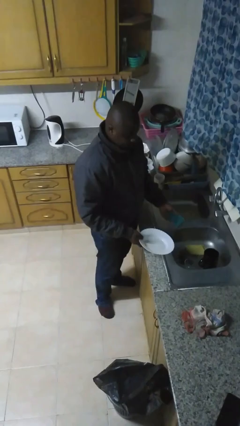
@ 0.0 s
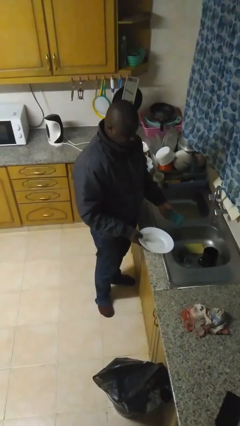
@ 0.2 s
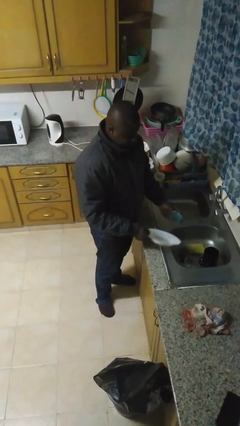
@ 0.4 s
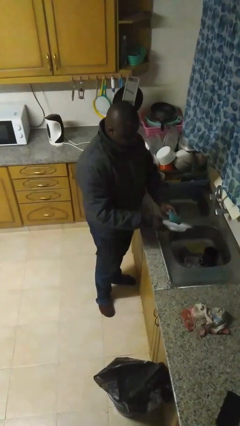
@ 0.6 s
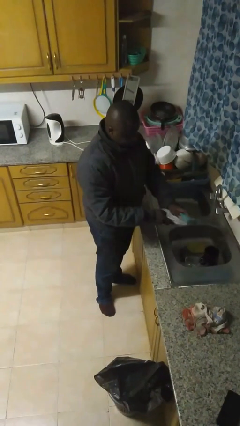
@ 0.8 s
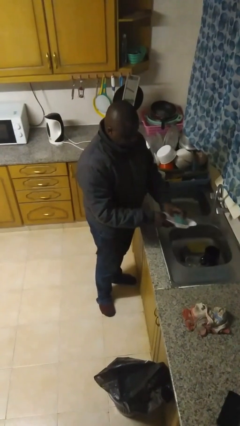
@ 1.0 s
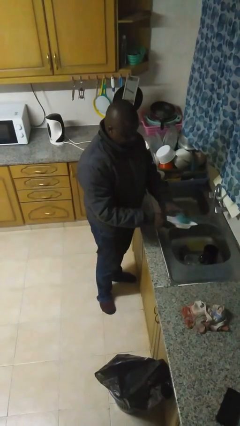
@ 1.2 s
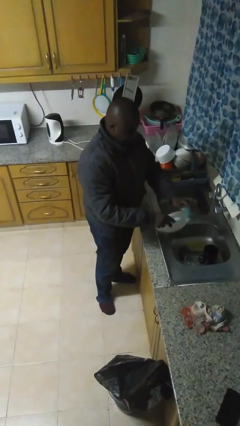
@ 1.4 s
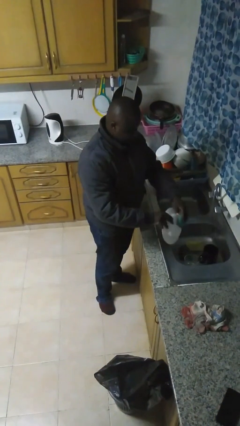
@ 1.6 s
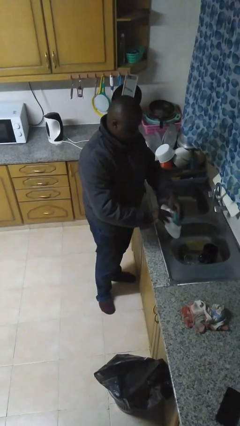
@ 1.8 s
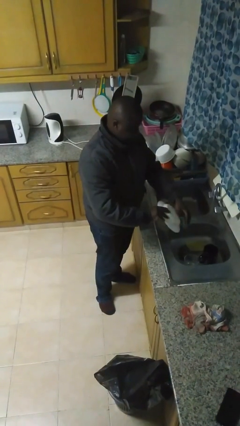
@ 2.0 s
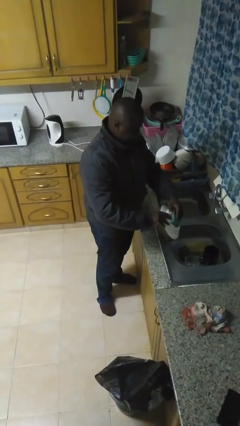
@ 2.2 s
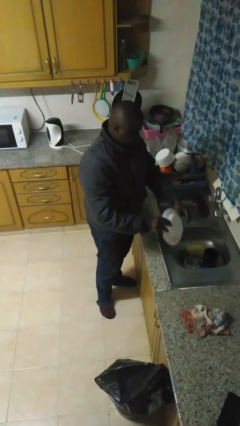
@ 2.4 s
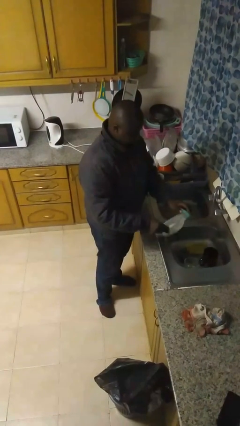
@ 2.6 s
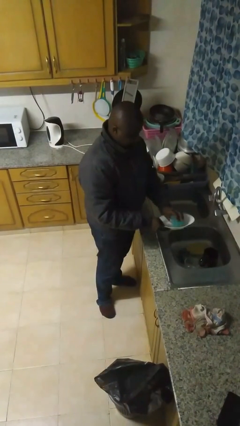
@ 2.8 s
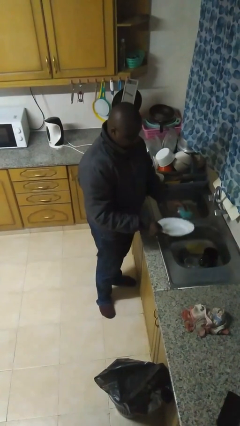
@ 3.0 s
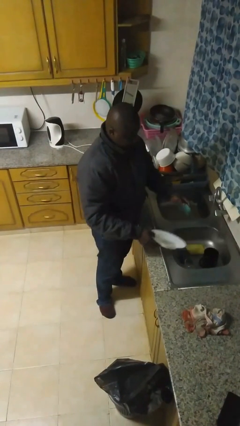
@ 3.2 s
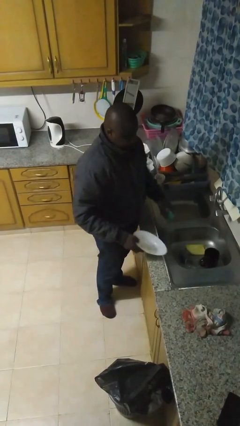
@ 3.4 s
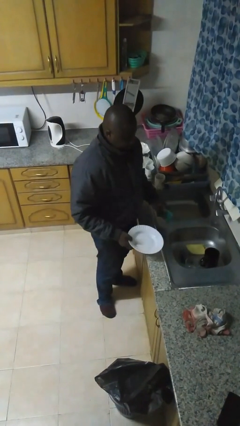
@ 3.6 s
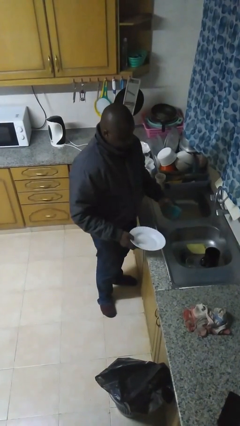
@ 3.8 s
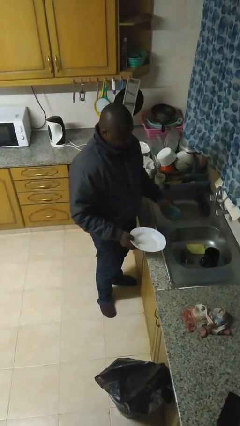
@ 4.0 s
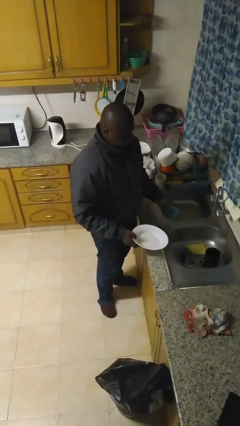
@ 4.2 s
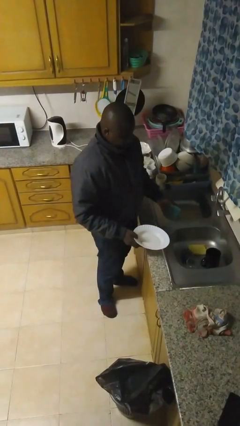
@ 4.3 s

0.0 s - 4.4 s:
person washes dish

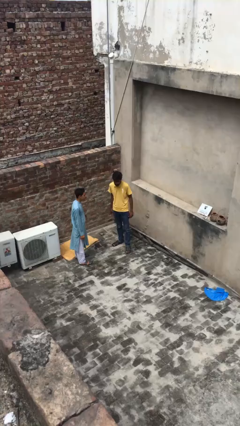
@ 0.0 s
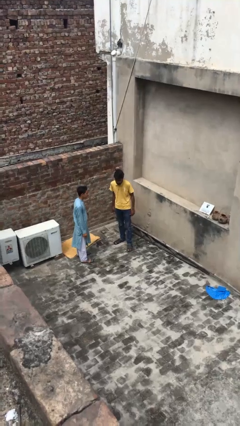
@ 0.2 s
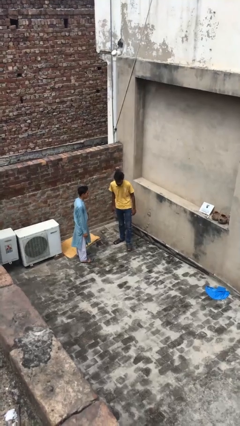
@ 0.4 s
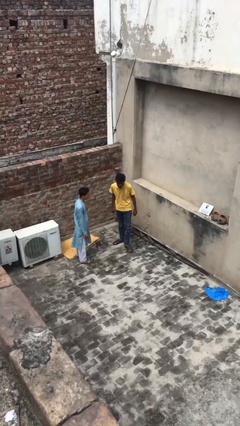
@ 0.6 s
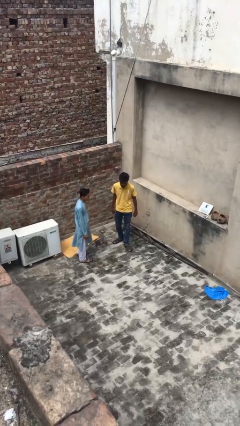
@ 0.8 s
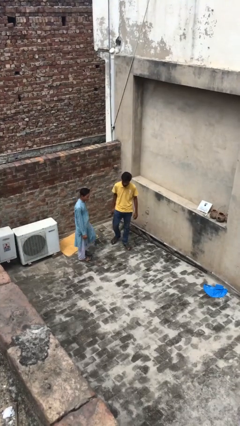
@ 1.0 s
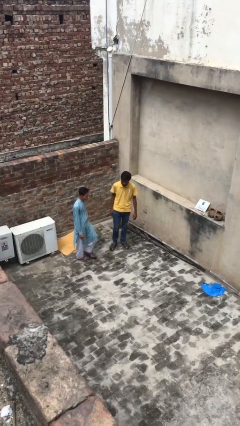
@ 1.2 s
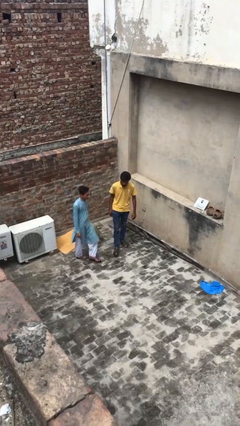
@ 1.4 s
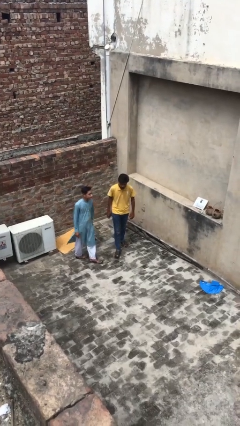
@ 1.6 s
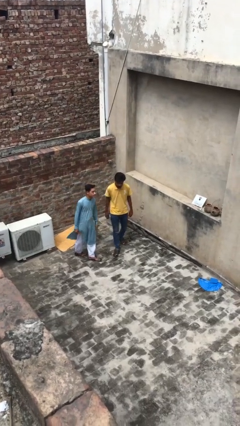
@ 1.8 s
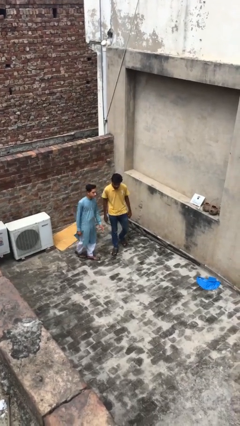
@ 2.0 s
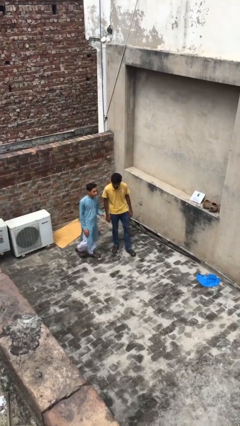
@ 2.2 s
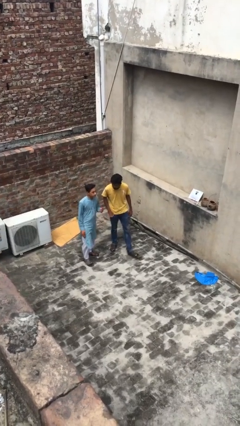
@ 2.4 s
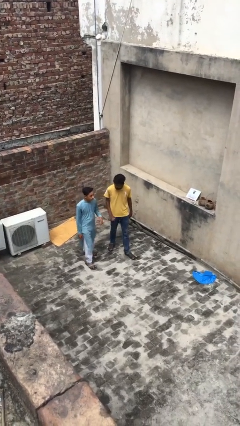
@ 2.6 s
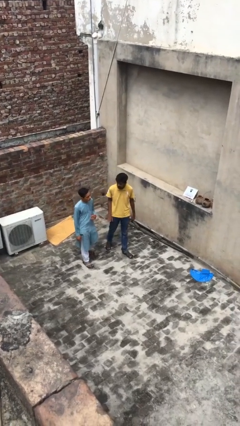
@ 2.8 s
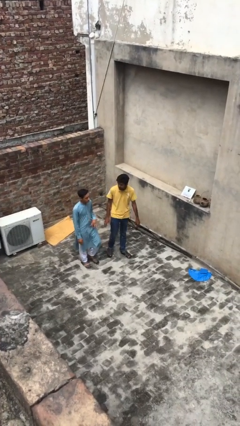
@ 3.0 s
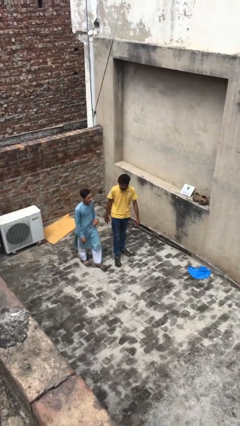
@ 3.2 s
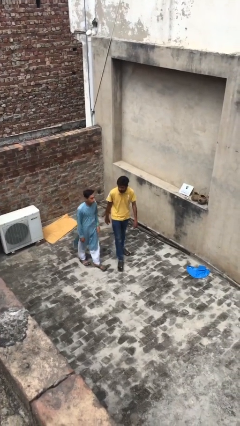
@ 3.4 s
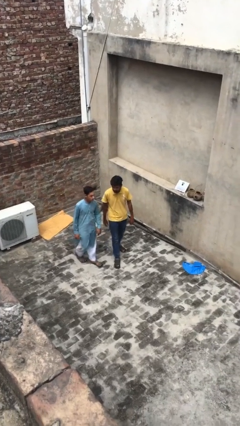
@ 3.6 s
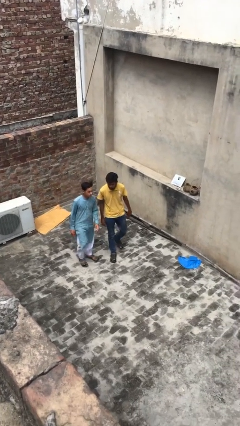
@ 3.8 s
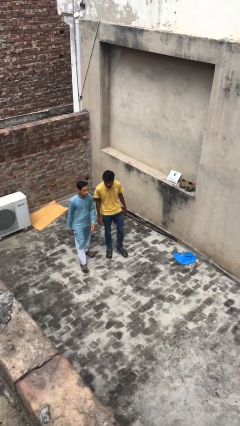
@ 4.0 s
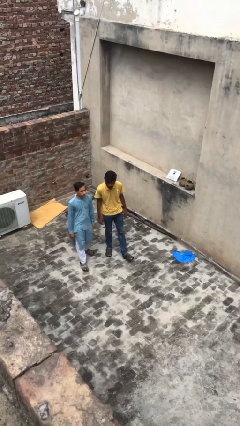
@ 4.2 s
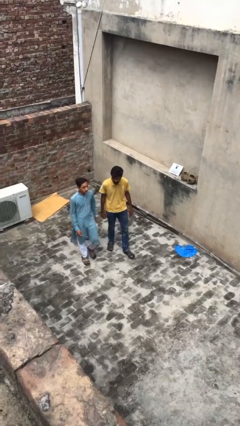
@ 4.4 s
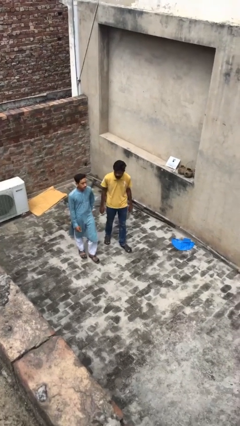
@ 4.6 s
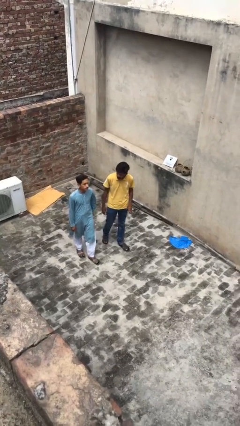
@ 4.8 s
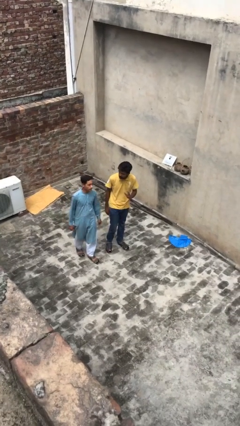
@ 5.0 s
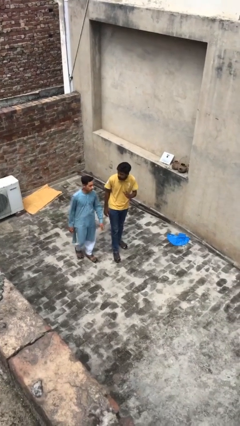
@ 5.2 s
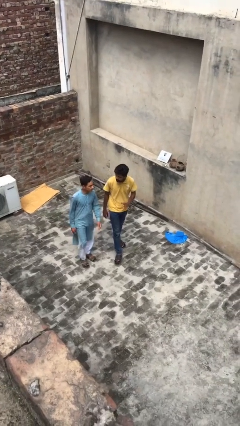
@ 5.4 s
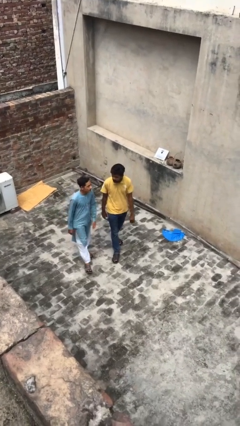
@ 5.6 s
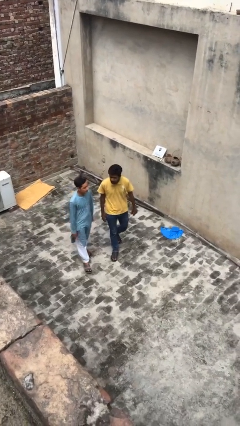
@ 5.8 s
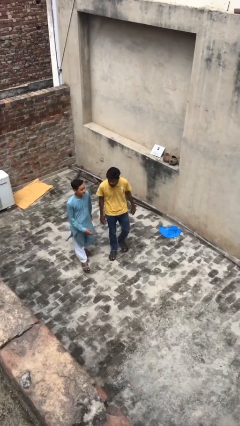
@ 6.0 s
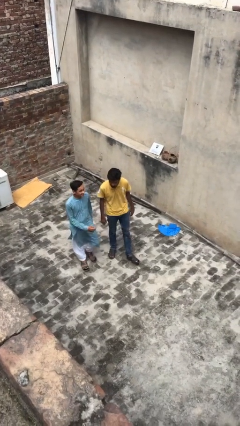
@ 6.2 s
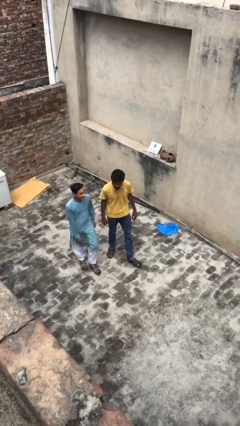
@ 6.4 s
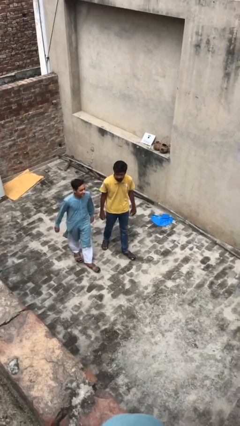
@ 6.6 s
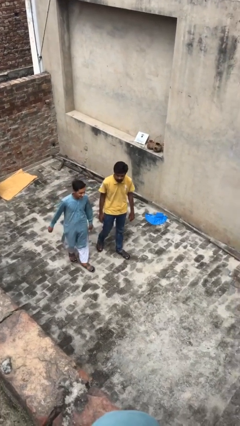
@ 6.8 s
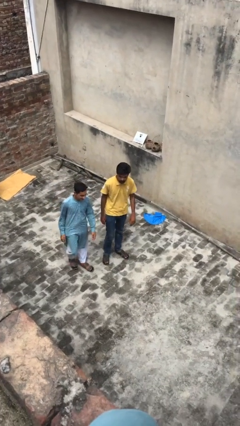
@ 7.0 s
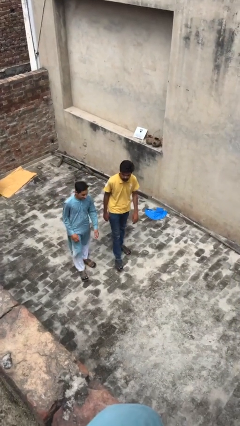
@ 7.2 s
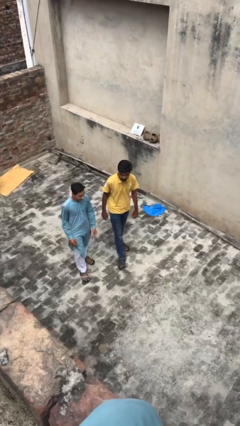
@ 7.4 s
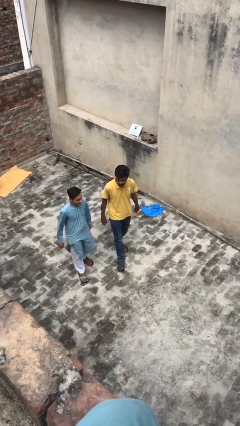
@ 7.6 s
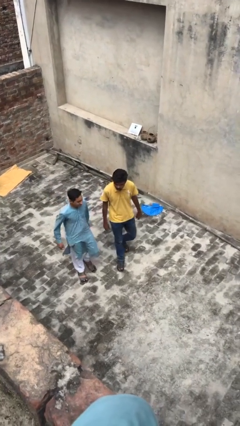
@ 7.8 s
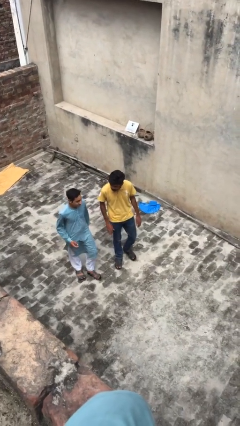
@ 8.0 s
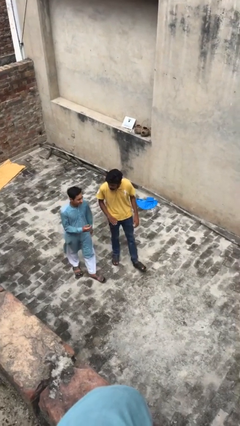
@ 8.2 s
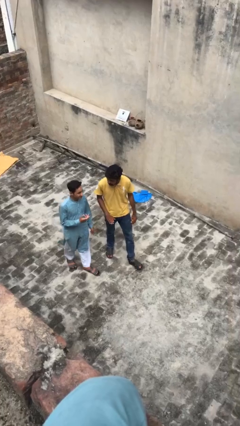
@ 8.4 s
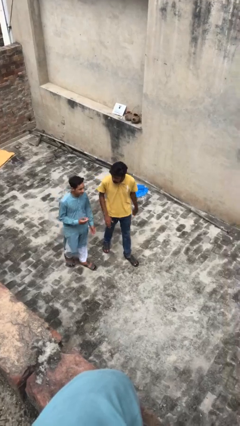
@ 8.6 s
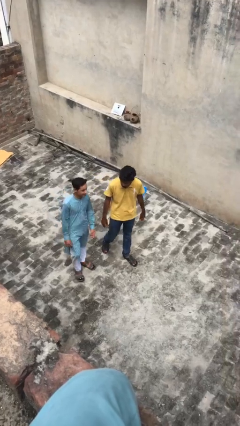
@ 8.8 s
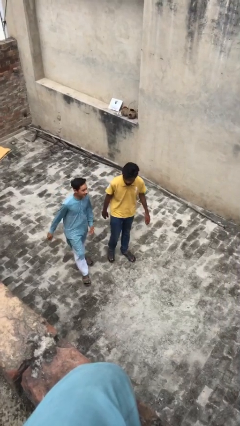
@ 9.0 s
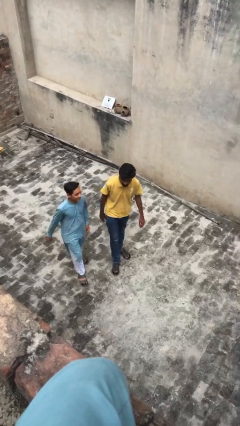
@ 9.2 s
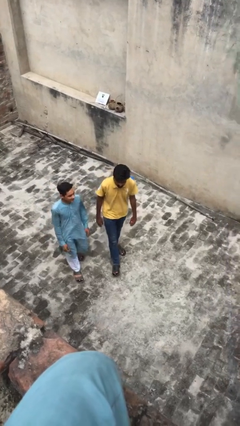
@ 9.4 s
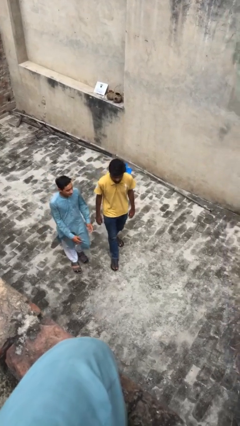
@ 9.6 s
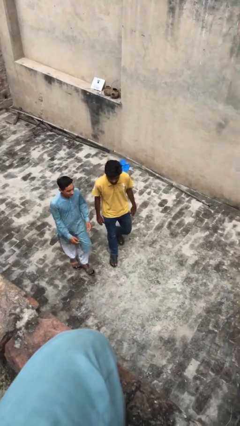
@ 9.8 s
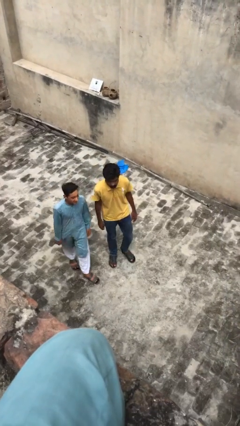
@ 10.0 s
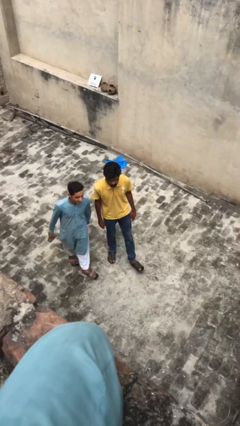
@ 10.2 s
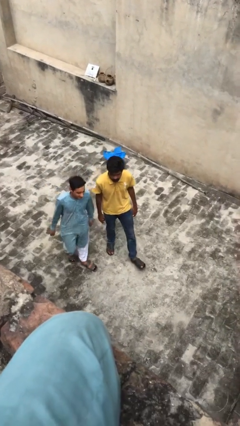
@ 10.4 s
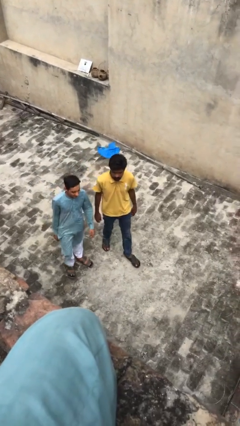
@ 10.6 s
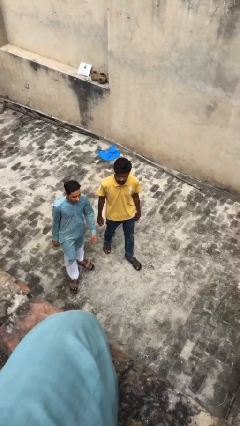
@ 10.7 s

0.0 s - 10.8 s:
person talks to person

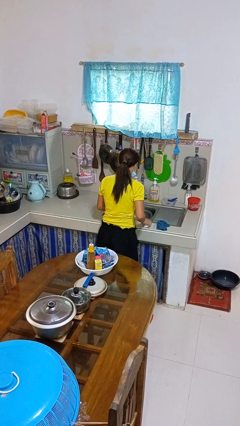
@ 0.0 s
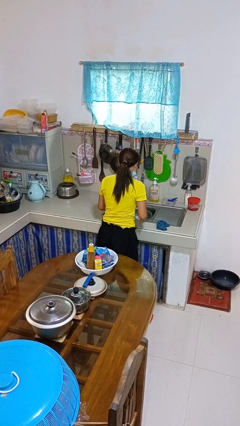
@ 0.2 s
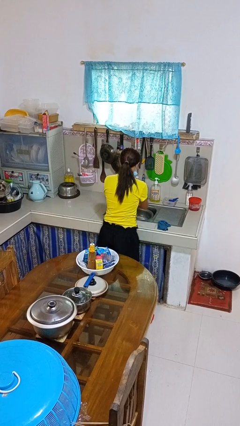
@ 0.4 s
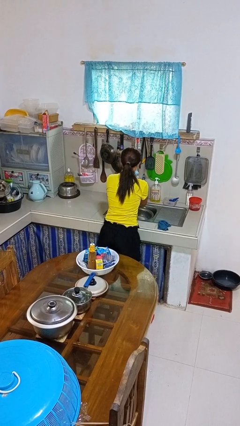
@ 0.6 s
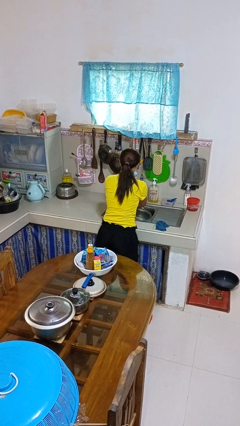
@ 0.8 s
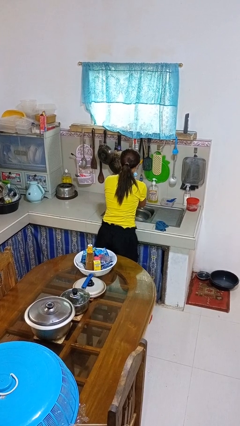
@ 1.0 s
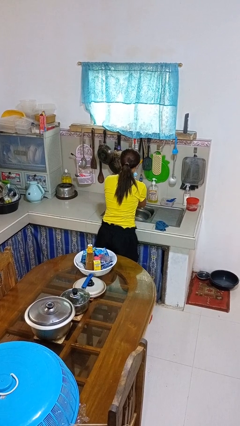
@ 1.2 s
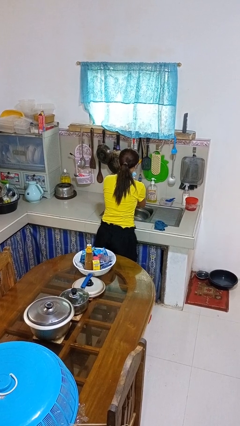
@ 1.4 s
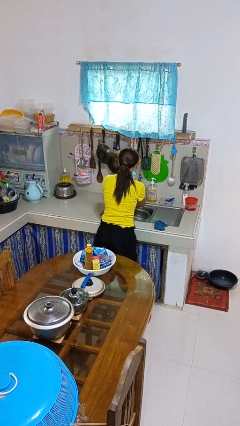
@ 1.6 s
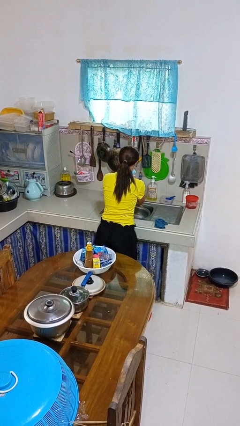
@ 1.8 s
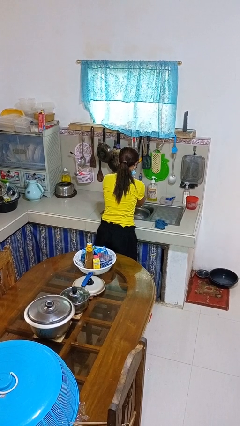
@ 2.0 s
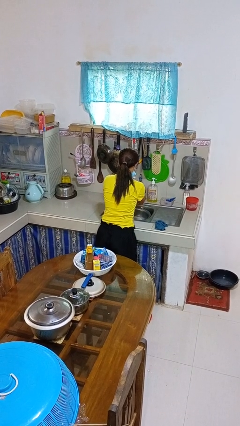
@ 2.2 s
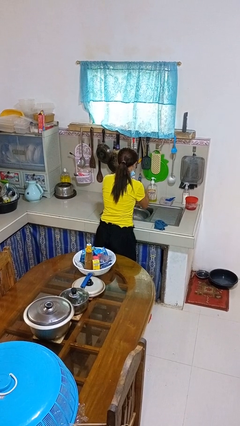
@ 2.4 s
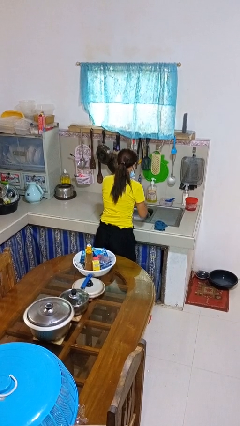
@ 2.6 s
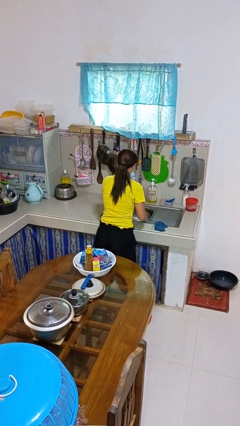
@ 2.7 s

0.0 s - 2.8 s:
person washes hands
